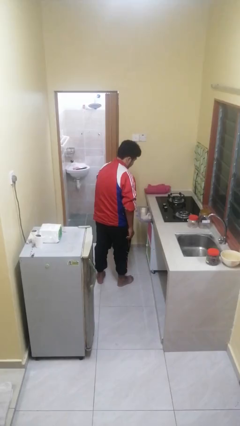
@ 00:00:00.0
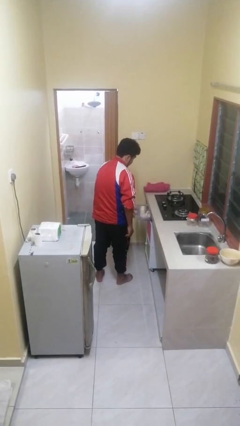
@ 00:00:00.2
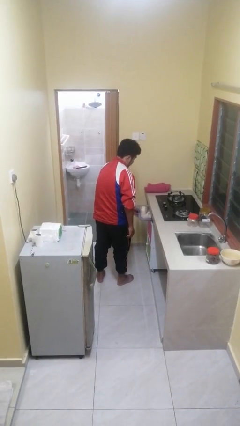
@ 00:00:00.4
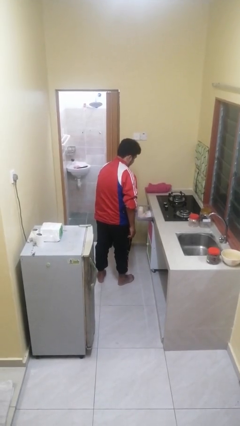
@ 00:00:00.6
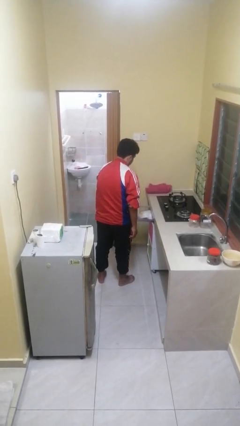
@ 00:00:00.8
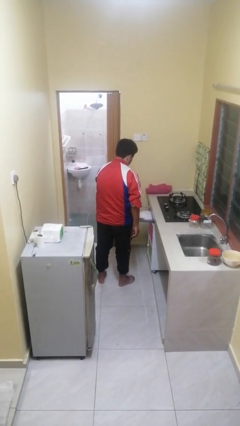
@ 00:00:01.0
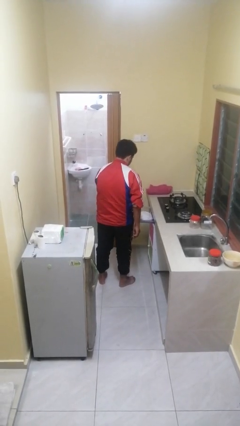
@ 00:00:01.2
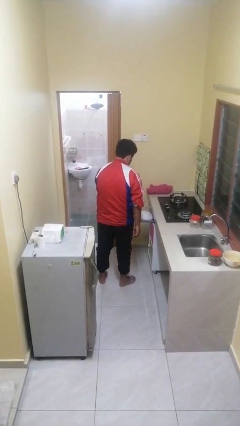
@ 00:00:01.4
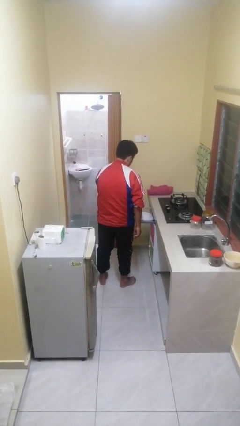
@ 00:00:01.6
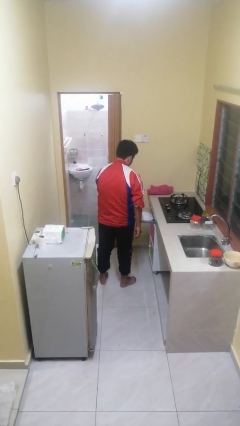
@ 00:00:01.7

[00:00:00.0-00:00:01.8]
person opens kitchen drawer

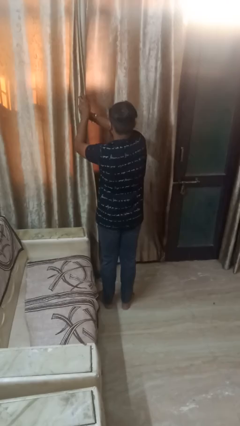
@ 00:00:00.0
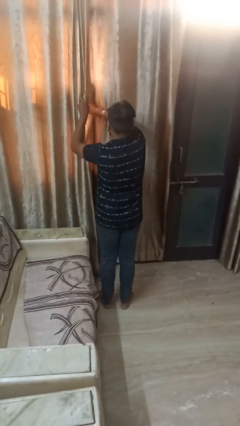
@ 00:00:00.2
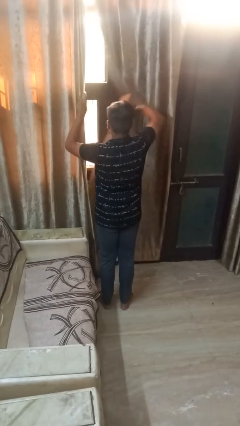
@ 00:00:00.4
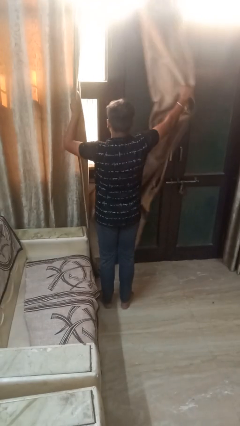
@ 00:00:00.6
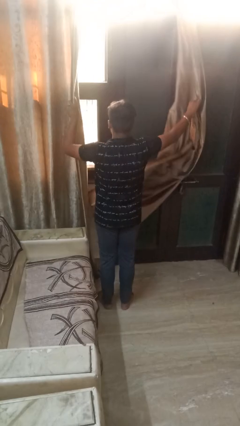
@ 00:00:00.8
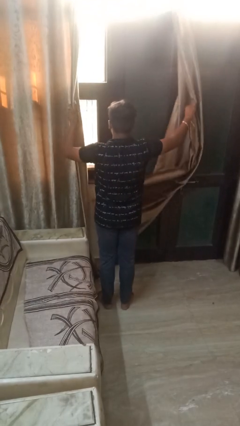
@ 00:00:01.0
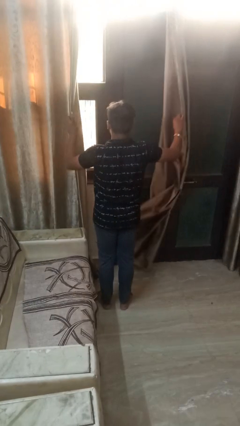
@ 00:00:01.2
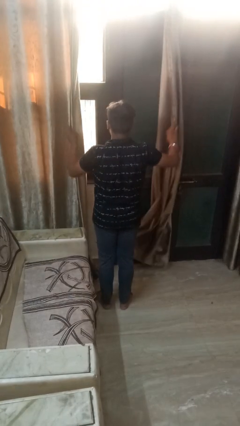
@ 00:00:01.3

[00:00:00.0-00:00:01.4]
person opens curtains

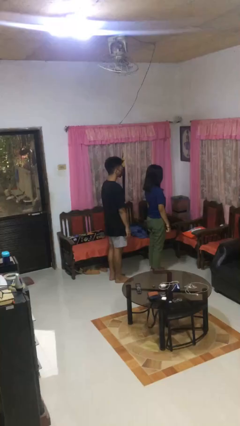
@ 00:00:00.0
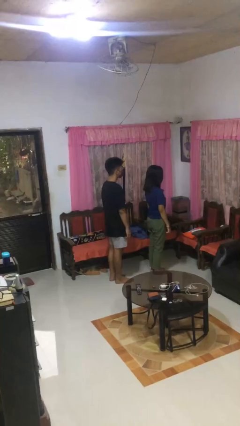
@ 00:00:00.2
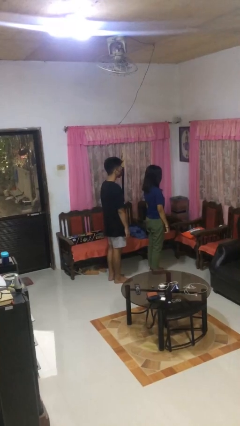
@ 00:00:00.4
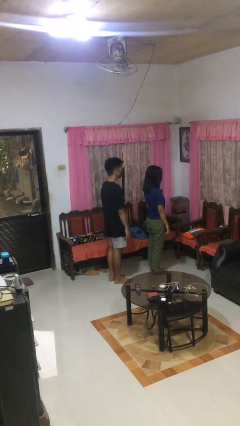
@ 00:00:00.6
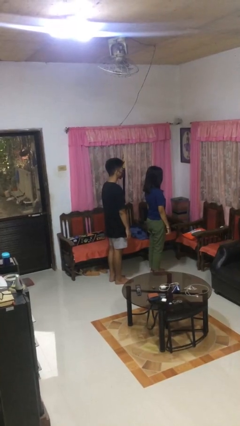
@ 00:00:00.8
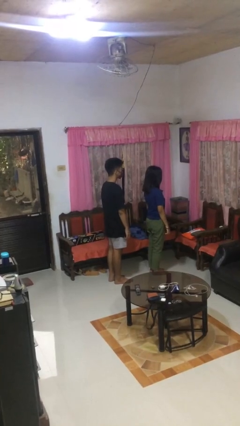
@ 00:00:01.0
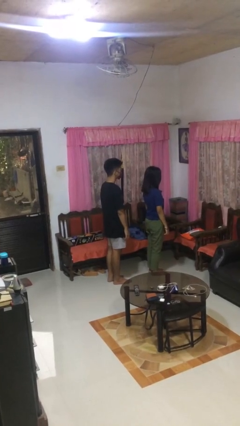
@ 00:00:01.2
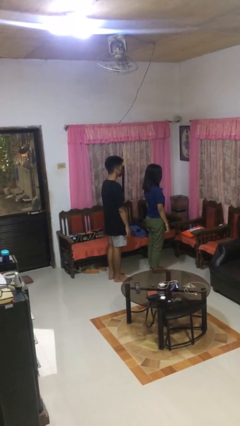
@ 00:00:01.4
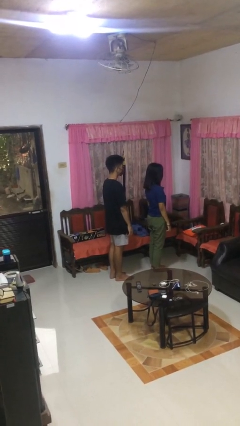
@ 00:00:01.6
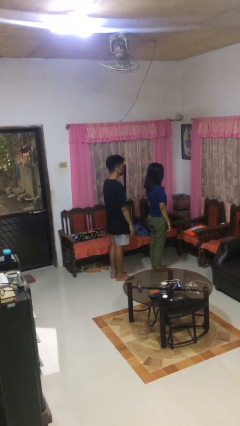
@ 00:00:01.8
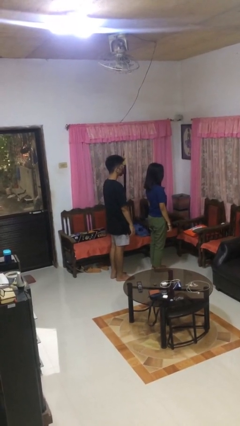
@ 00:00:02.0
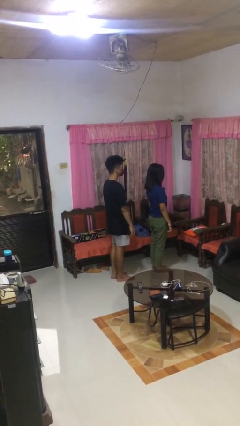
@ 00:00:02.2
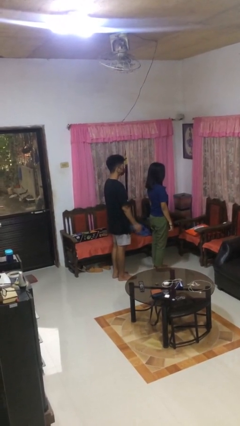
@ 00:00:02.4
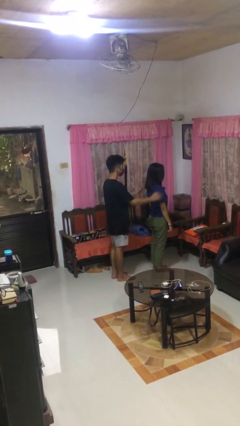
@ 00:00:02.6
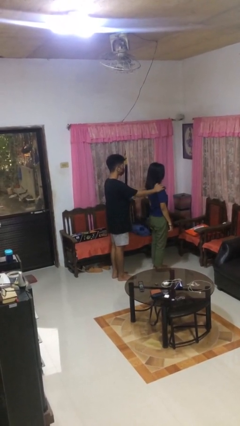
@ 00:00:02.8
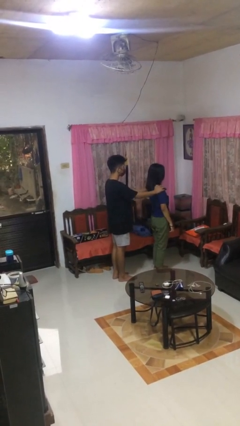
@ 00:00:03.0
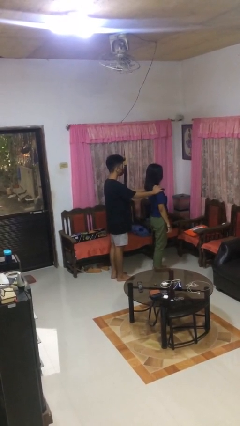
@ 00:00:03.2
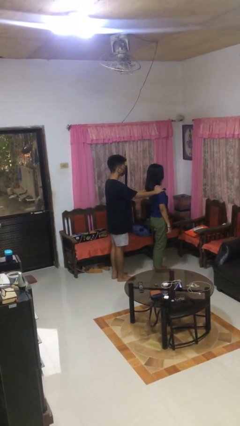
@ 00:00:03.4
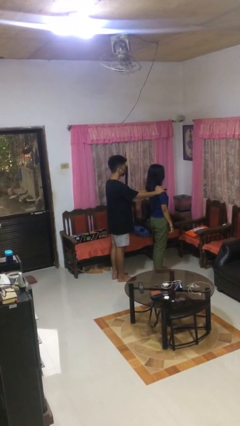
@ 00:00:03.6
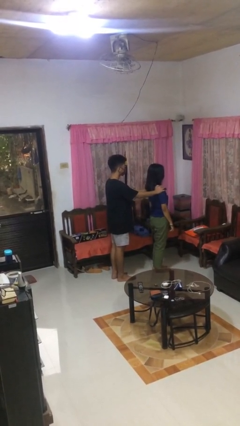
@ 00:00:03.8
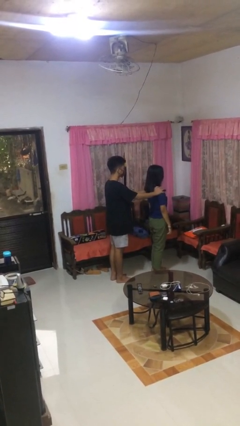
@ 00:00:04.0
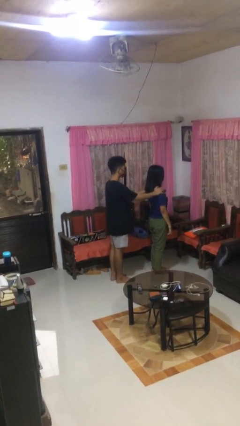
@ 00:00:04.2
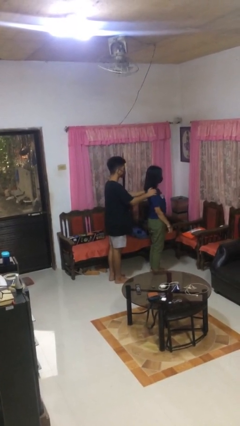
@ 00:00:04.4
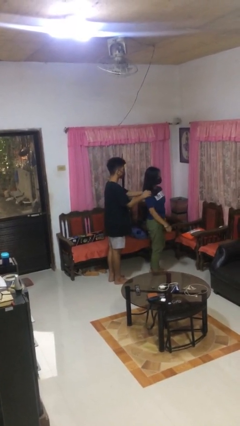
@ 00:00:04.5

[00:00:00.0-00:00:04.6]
person grabs person by shoulder

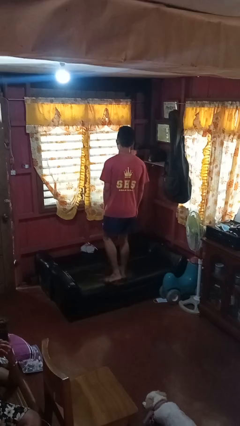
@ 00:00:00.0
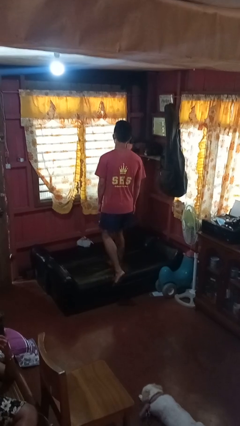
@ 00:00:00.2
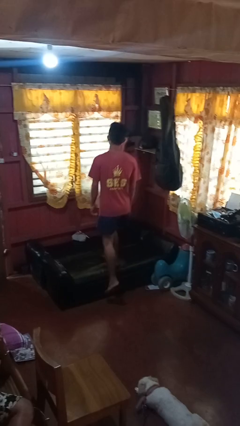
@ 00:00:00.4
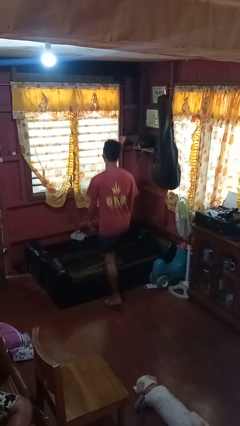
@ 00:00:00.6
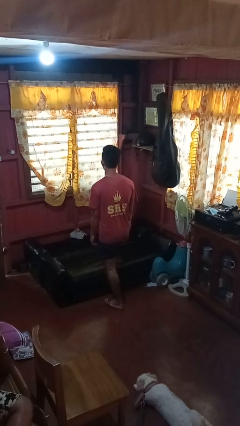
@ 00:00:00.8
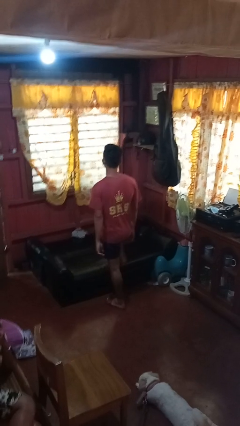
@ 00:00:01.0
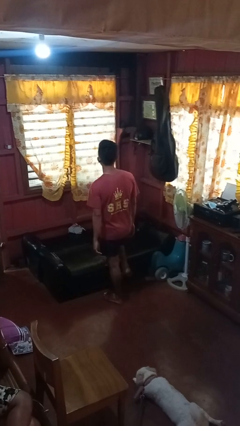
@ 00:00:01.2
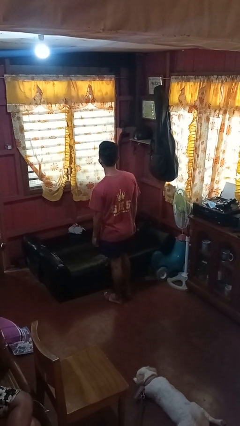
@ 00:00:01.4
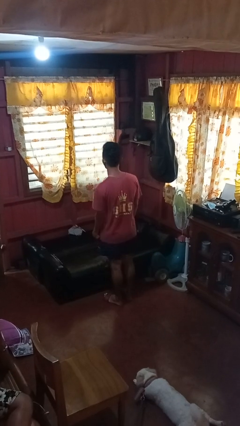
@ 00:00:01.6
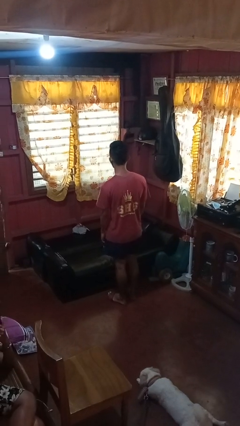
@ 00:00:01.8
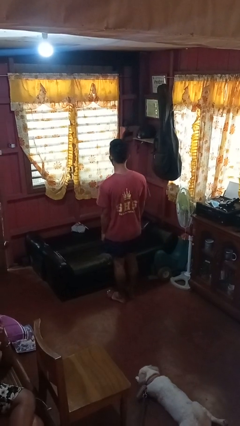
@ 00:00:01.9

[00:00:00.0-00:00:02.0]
person climbs off couch

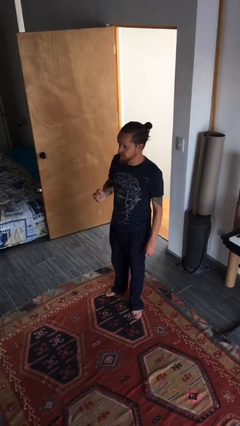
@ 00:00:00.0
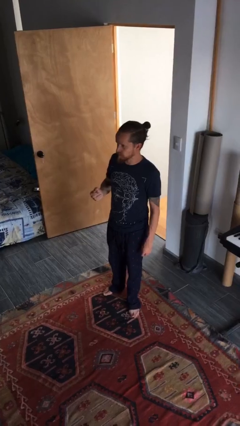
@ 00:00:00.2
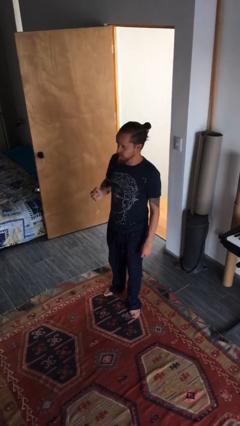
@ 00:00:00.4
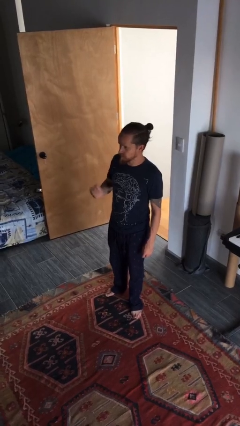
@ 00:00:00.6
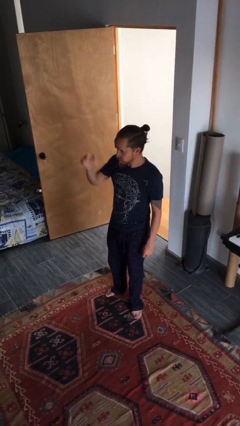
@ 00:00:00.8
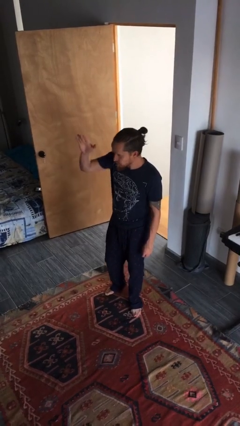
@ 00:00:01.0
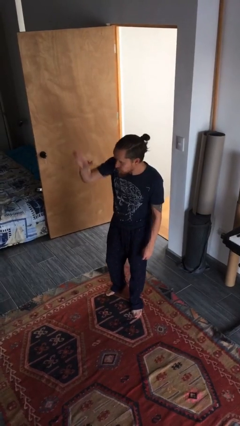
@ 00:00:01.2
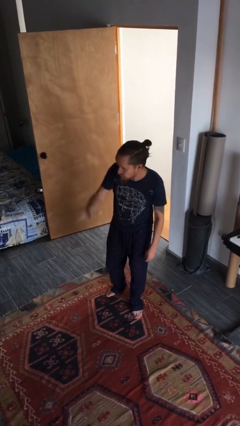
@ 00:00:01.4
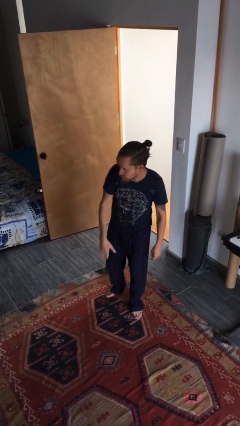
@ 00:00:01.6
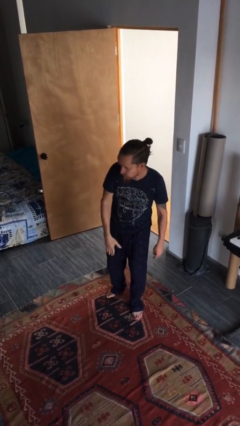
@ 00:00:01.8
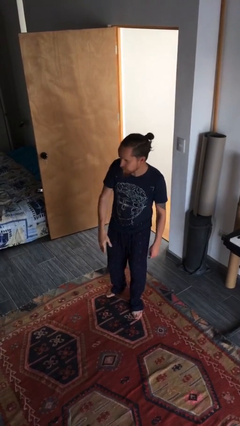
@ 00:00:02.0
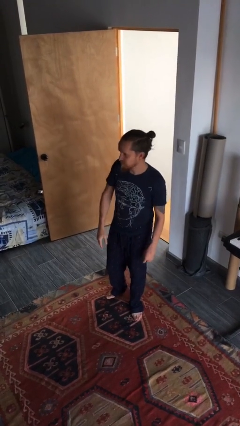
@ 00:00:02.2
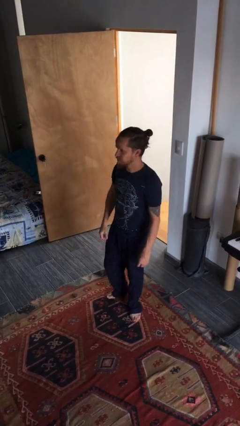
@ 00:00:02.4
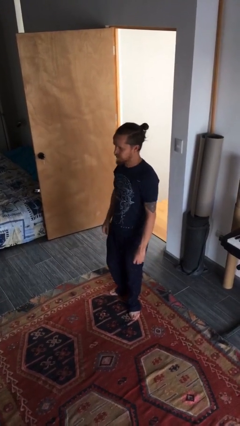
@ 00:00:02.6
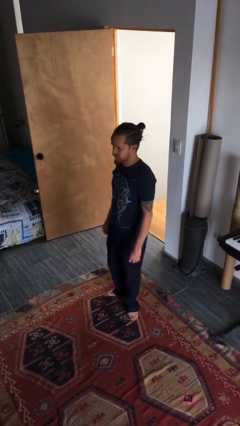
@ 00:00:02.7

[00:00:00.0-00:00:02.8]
person gestures swipe down

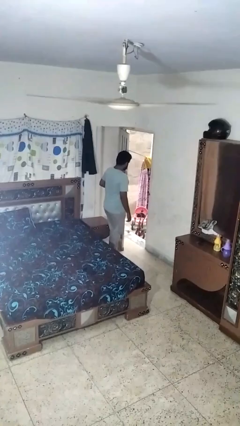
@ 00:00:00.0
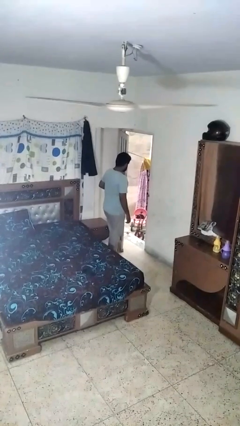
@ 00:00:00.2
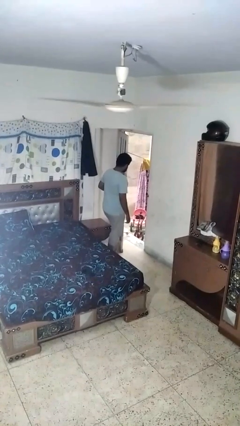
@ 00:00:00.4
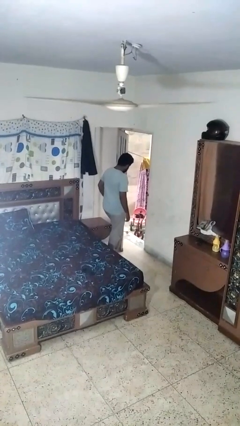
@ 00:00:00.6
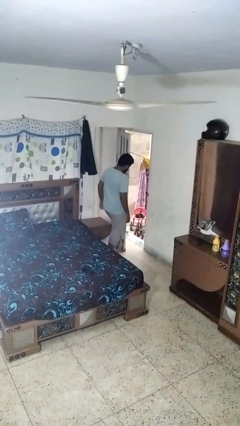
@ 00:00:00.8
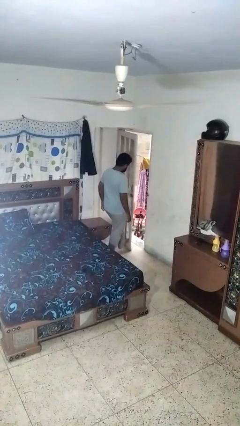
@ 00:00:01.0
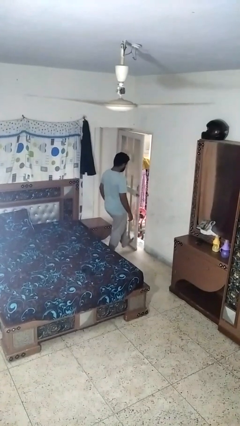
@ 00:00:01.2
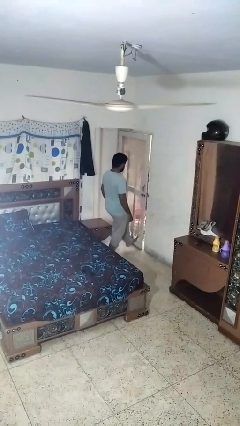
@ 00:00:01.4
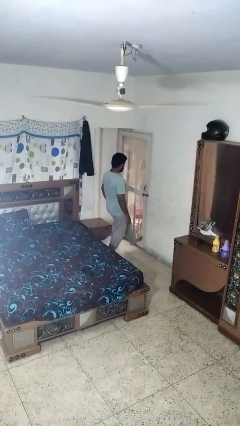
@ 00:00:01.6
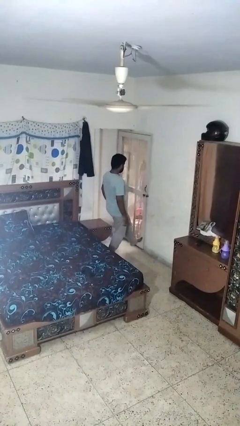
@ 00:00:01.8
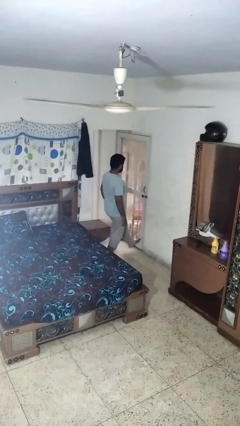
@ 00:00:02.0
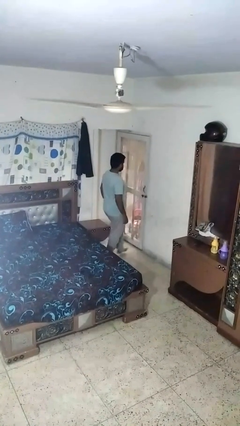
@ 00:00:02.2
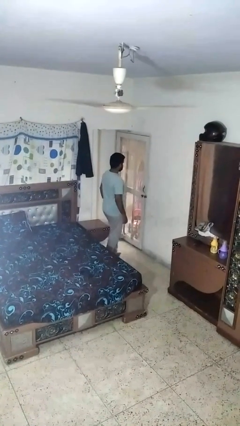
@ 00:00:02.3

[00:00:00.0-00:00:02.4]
person closes door with foot

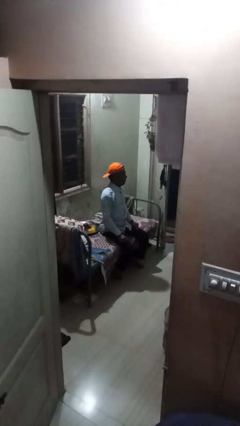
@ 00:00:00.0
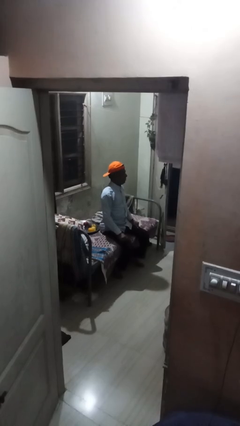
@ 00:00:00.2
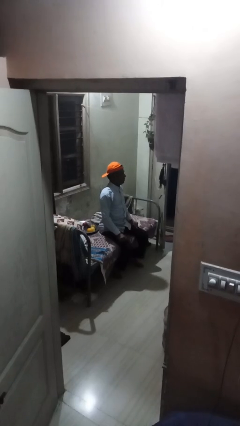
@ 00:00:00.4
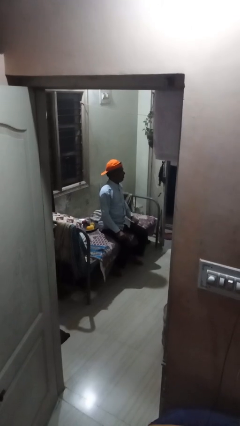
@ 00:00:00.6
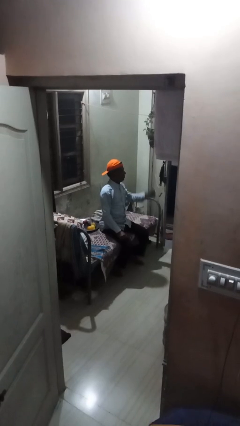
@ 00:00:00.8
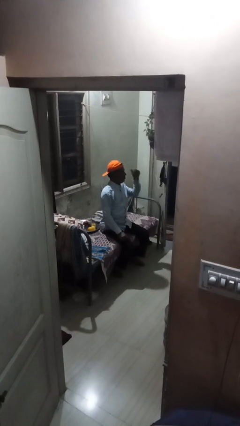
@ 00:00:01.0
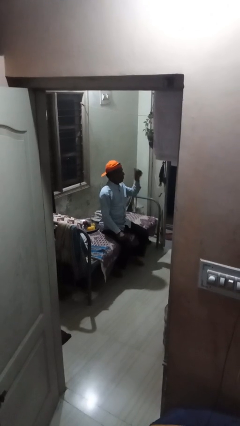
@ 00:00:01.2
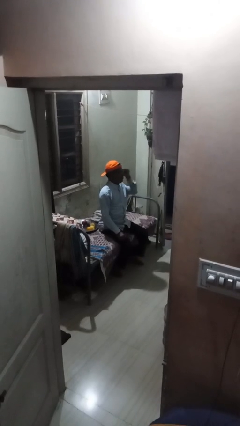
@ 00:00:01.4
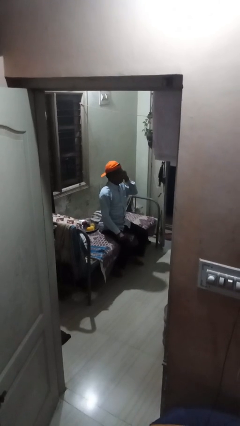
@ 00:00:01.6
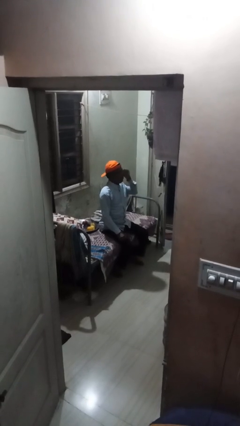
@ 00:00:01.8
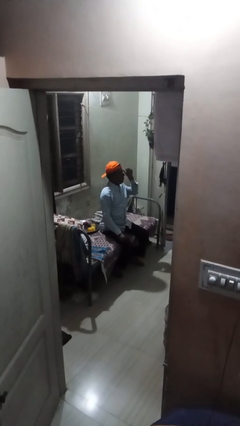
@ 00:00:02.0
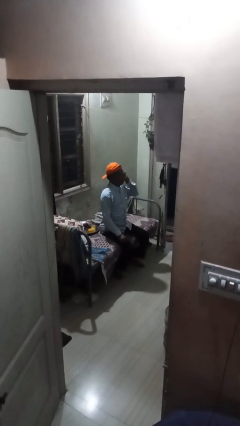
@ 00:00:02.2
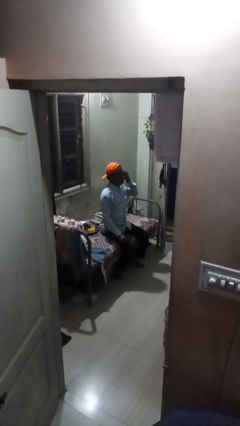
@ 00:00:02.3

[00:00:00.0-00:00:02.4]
person gestures behind me
